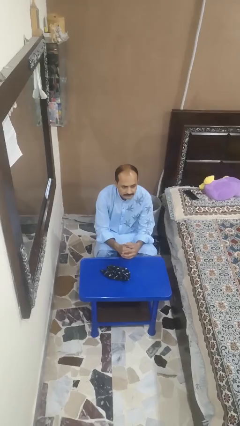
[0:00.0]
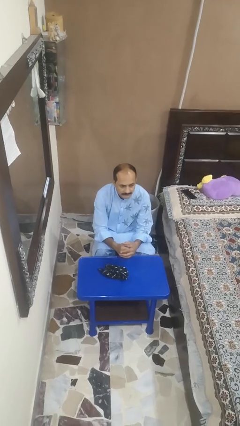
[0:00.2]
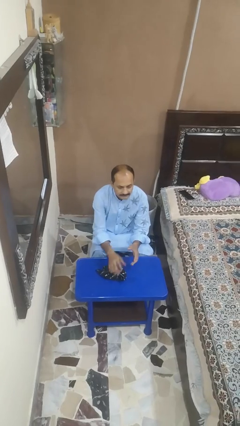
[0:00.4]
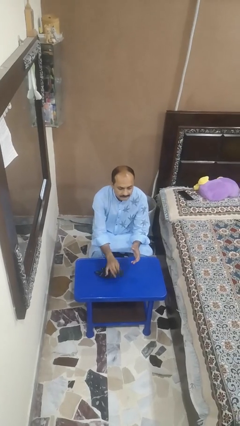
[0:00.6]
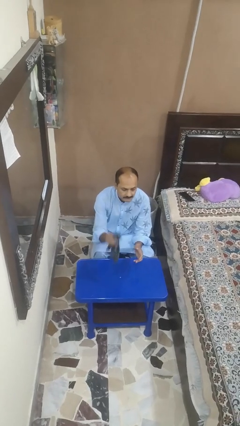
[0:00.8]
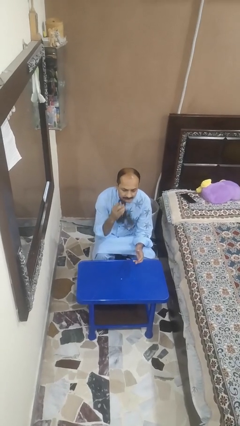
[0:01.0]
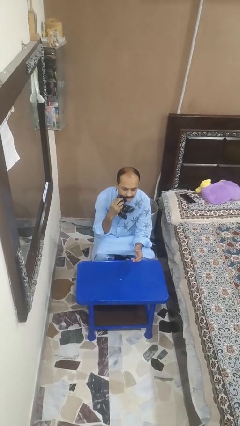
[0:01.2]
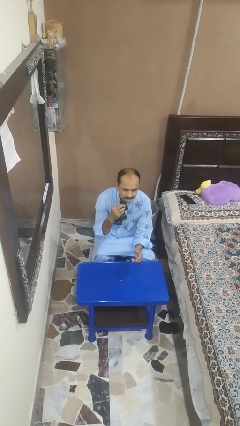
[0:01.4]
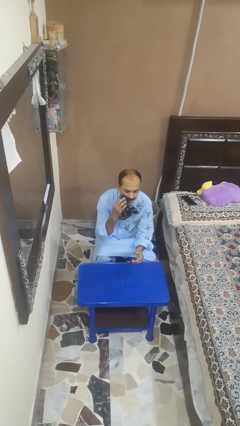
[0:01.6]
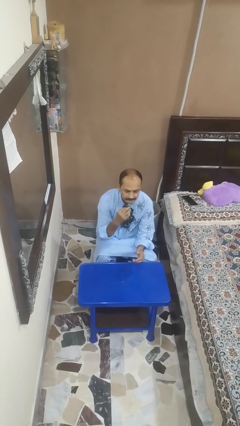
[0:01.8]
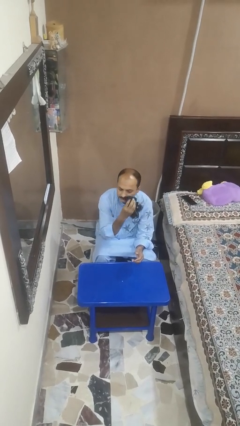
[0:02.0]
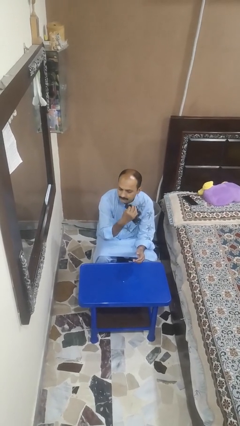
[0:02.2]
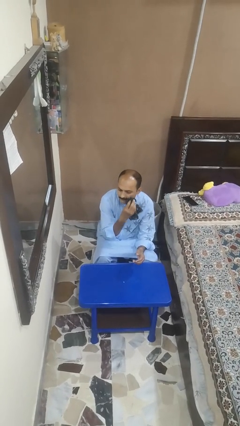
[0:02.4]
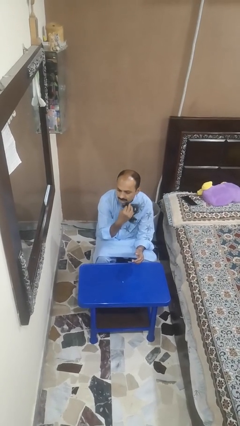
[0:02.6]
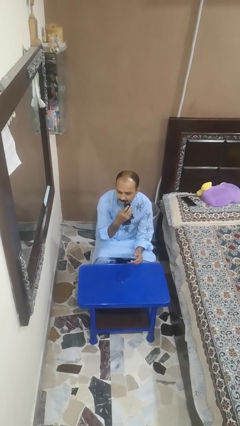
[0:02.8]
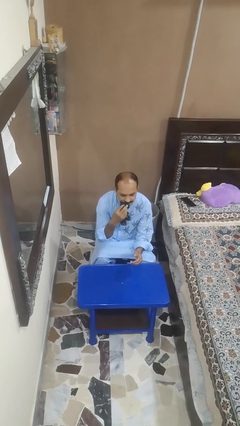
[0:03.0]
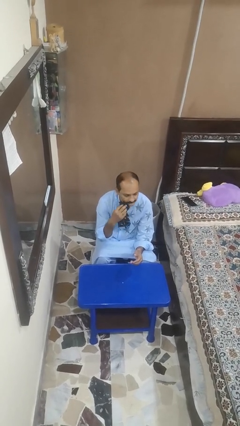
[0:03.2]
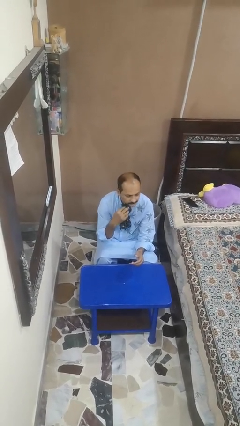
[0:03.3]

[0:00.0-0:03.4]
person wipes mouth with napkin

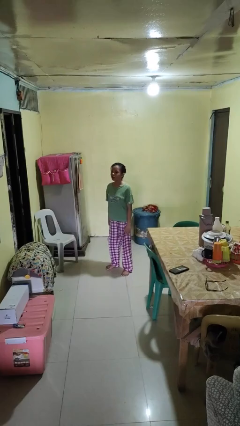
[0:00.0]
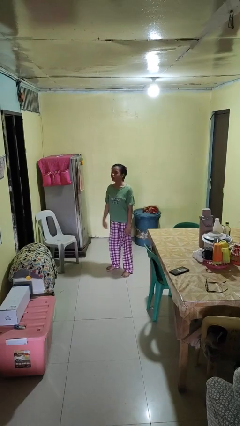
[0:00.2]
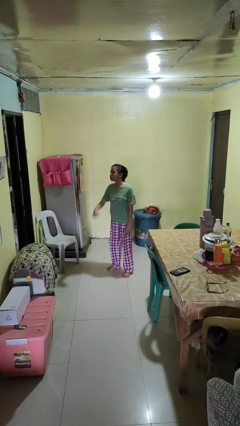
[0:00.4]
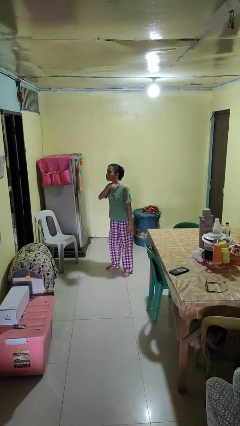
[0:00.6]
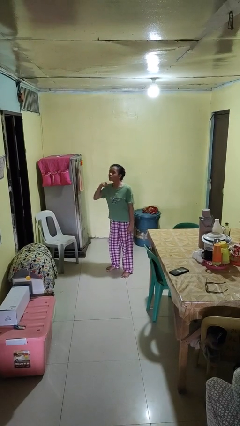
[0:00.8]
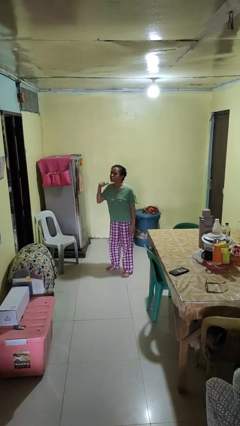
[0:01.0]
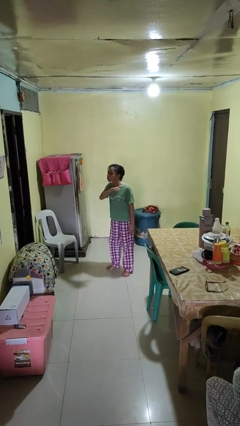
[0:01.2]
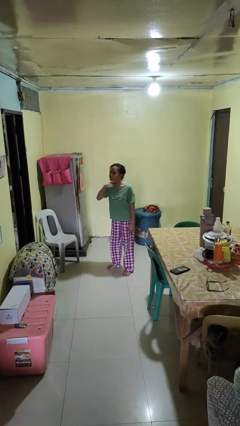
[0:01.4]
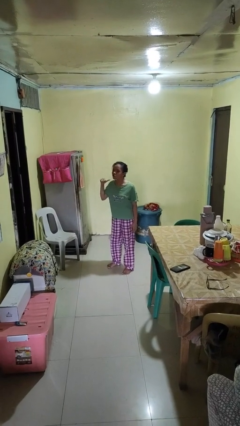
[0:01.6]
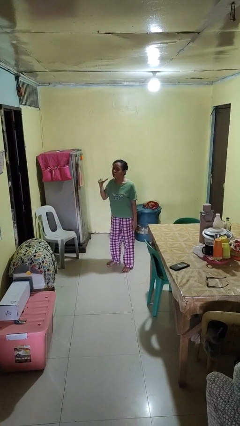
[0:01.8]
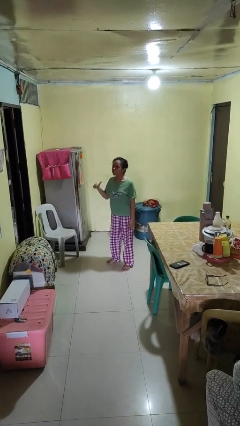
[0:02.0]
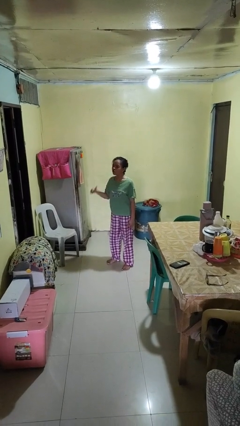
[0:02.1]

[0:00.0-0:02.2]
person gestures cut

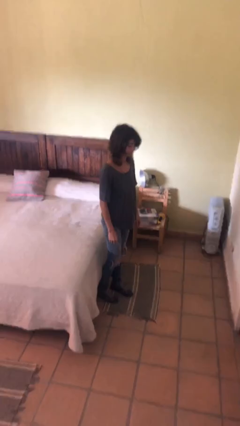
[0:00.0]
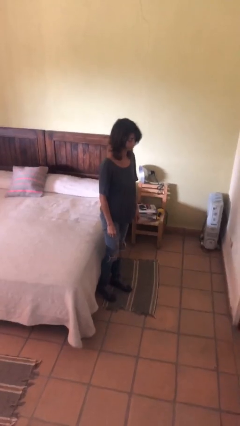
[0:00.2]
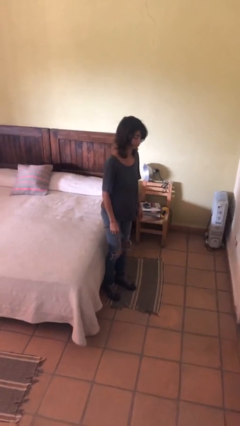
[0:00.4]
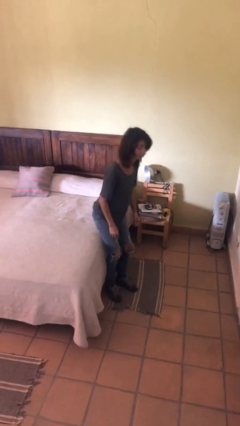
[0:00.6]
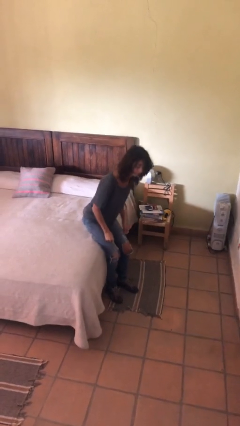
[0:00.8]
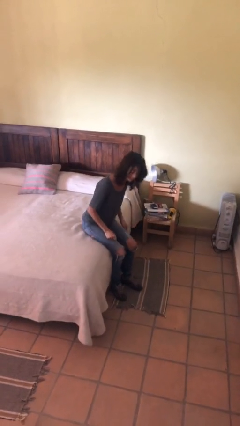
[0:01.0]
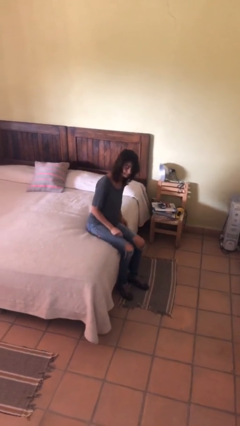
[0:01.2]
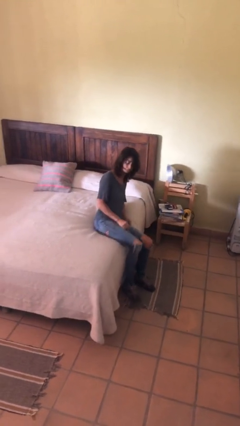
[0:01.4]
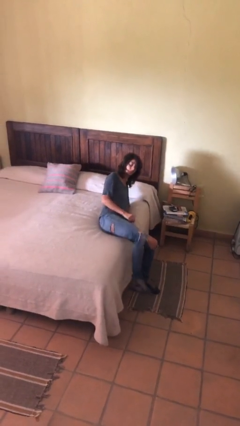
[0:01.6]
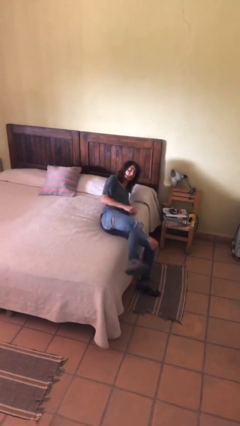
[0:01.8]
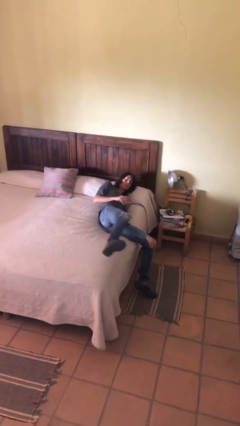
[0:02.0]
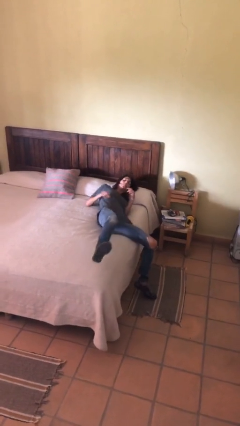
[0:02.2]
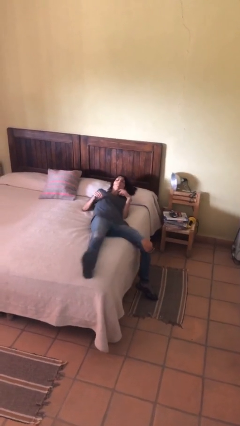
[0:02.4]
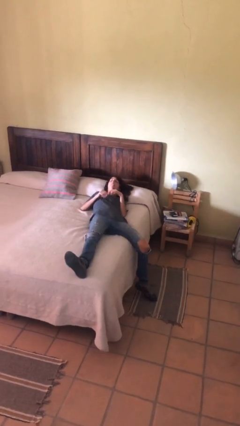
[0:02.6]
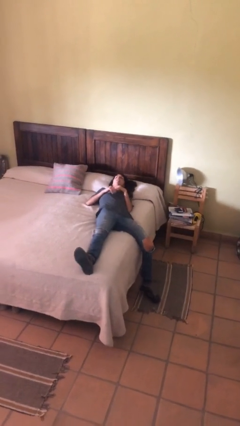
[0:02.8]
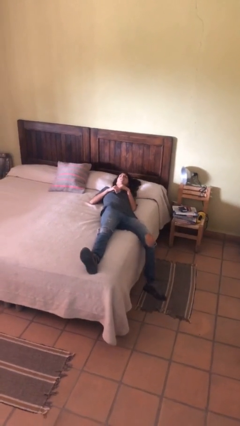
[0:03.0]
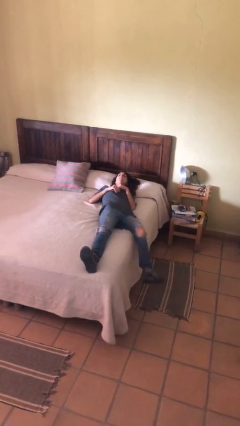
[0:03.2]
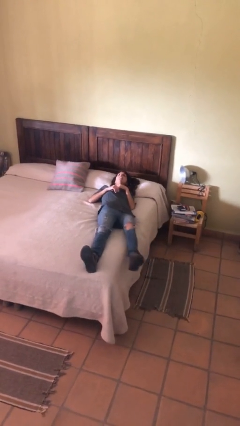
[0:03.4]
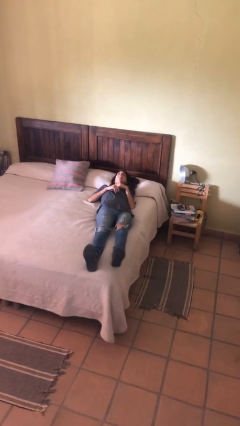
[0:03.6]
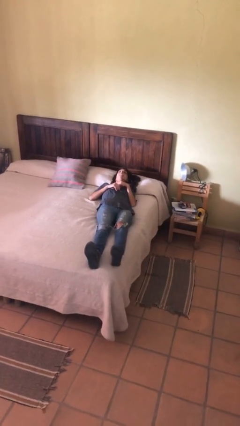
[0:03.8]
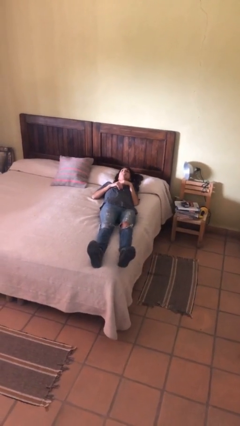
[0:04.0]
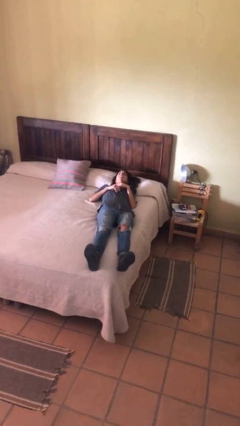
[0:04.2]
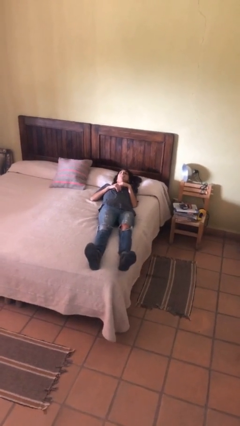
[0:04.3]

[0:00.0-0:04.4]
person lies down on bed

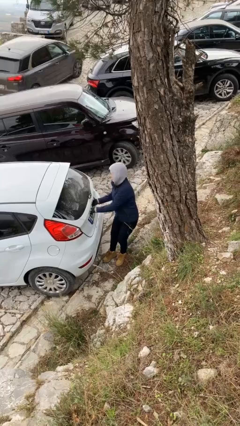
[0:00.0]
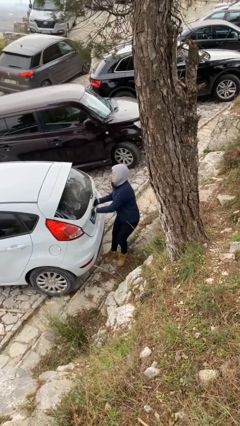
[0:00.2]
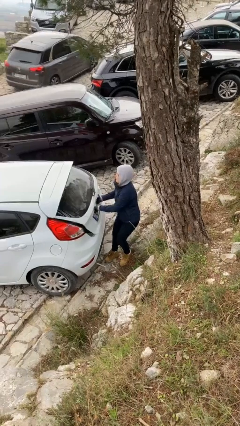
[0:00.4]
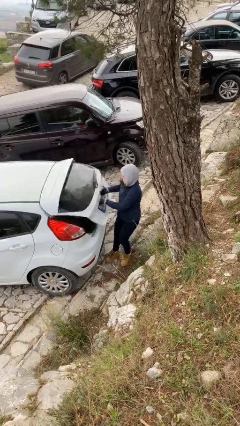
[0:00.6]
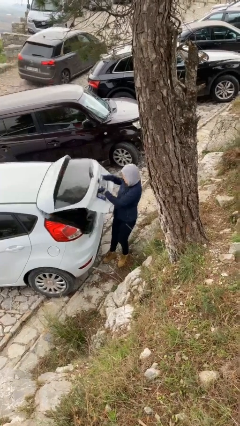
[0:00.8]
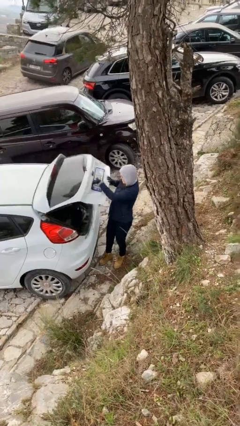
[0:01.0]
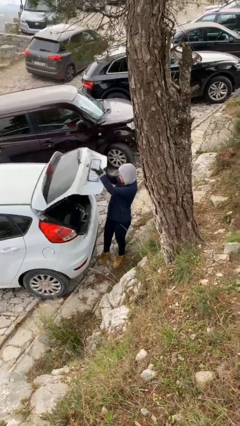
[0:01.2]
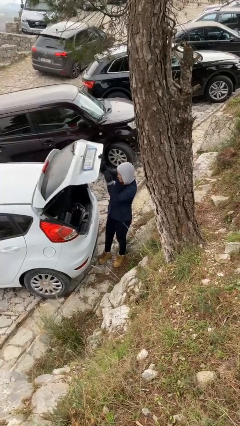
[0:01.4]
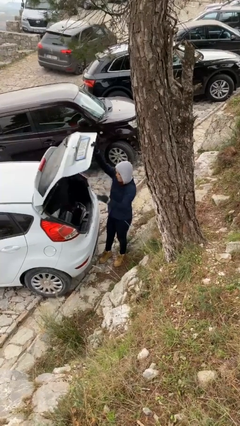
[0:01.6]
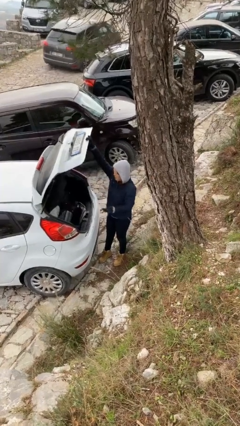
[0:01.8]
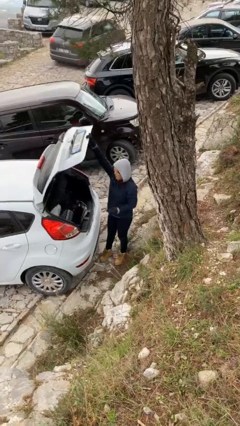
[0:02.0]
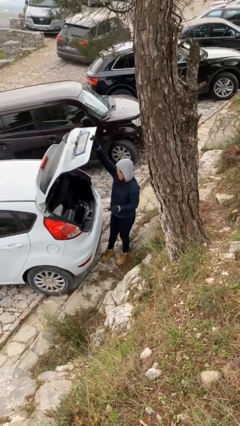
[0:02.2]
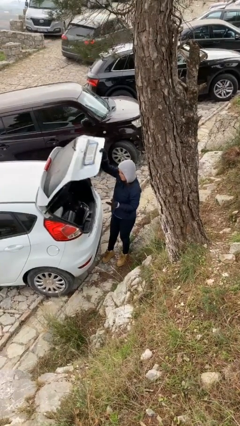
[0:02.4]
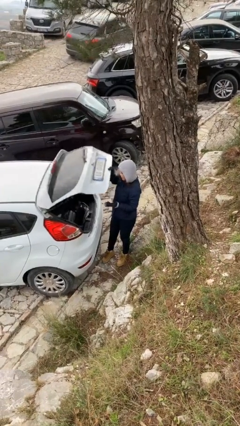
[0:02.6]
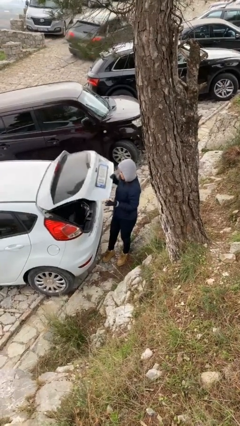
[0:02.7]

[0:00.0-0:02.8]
person opens car trunk

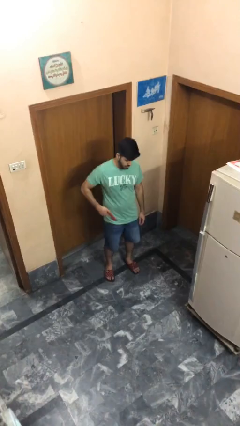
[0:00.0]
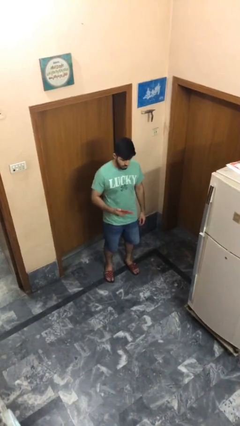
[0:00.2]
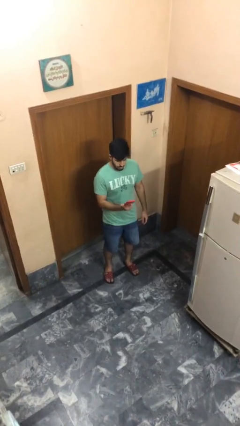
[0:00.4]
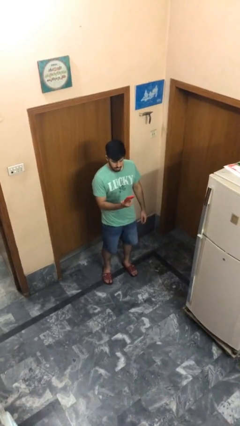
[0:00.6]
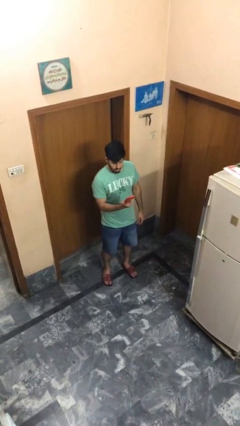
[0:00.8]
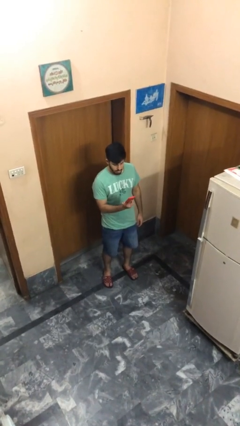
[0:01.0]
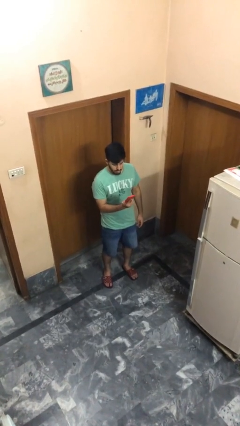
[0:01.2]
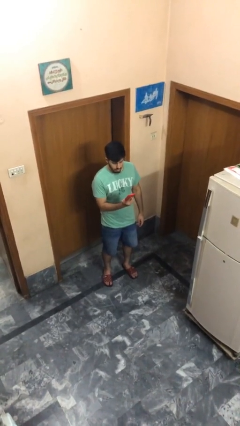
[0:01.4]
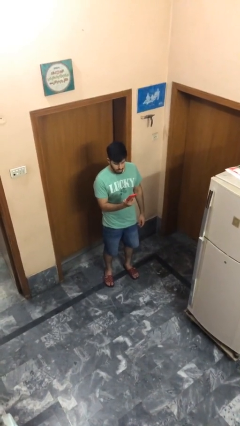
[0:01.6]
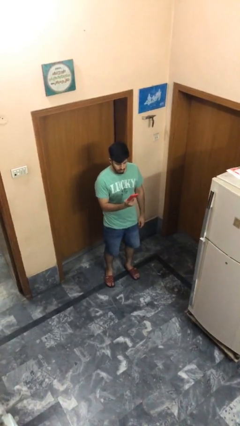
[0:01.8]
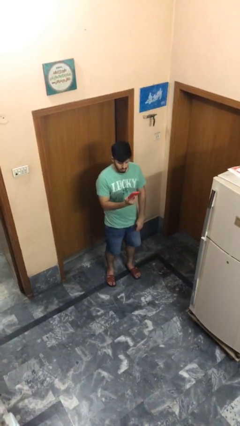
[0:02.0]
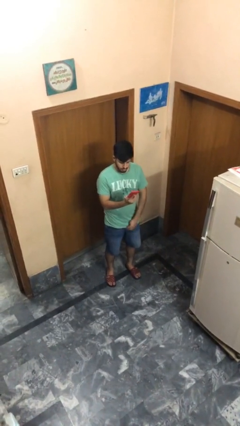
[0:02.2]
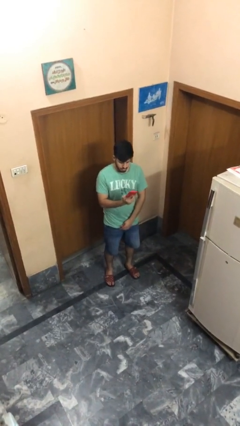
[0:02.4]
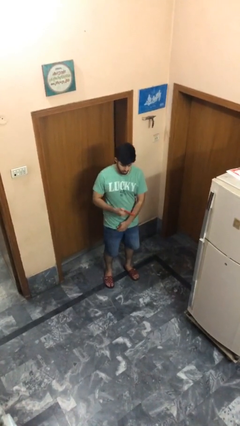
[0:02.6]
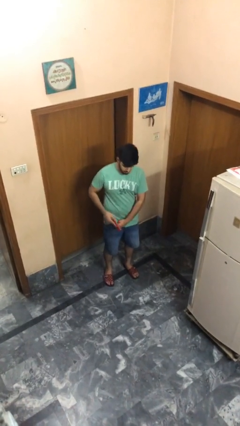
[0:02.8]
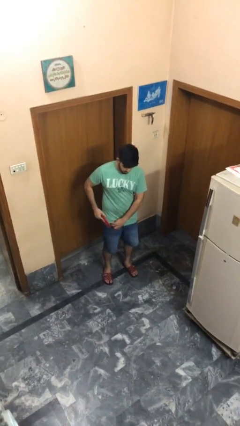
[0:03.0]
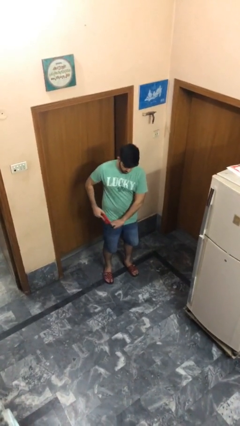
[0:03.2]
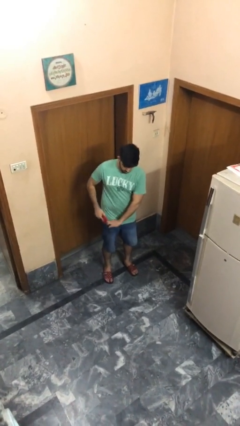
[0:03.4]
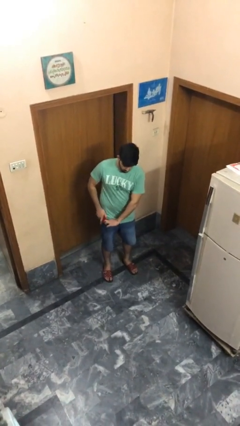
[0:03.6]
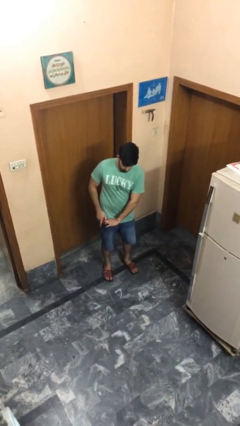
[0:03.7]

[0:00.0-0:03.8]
person takes phone from pocket

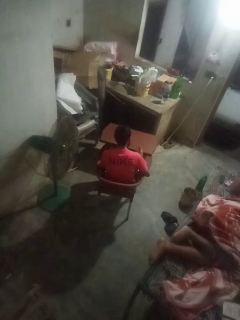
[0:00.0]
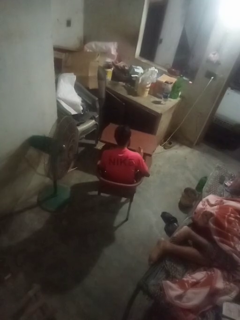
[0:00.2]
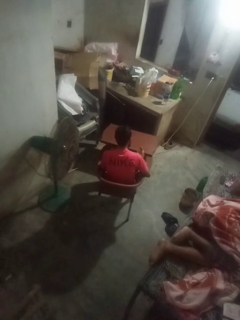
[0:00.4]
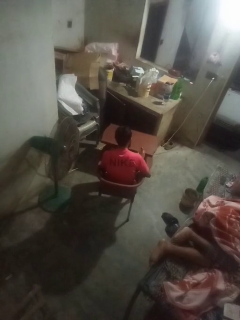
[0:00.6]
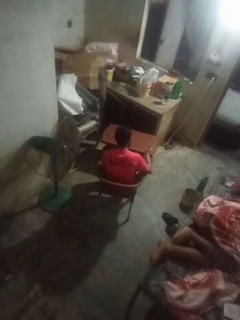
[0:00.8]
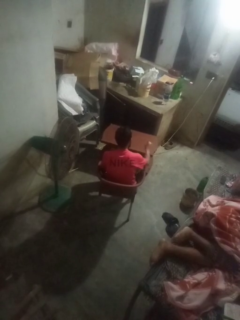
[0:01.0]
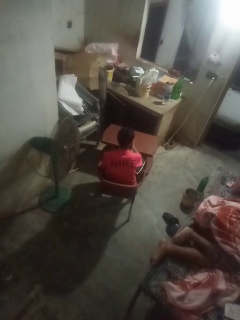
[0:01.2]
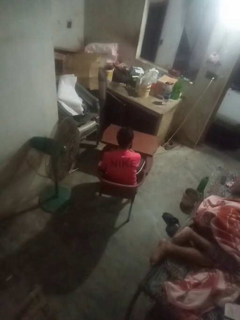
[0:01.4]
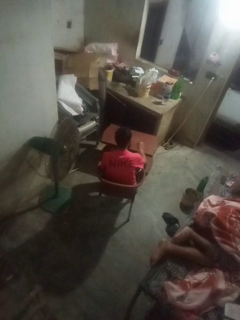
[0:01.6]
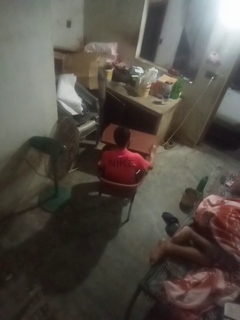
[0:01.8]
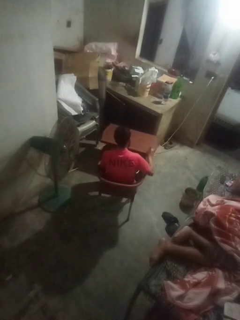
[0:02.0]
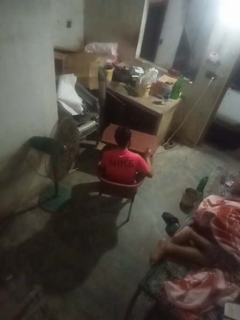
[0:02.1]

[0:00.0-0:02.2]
person sprays from bottle
